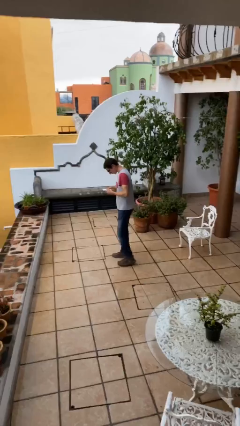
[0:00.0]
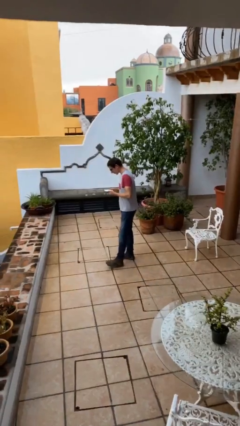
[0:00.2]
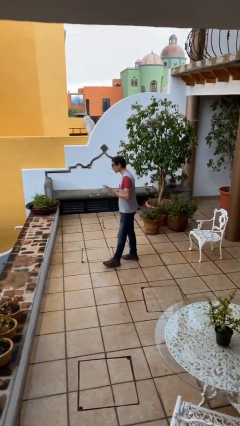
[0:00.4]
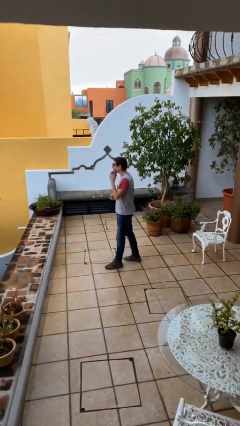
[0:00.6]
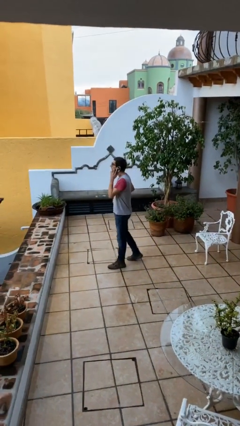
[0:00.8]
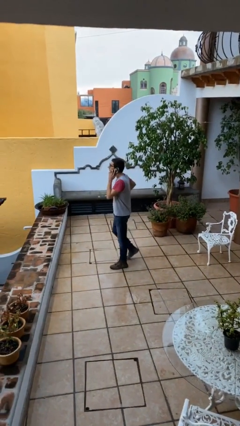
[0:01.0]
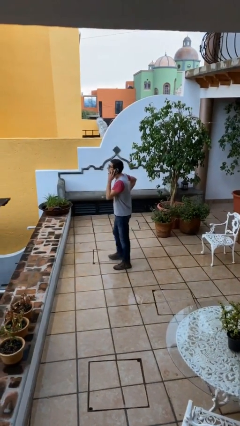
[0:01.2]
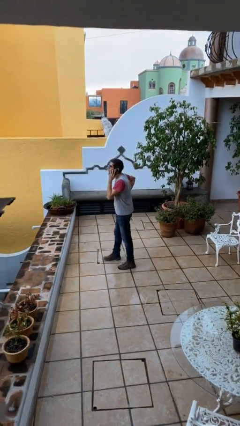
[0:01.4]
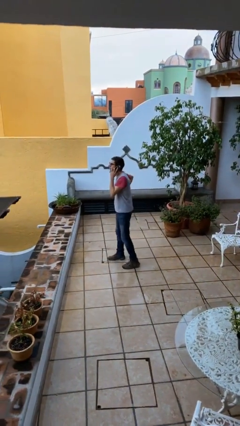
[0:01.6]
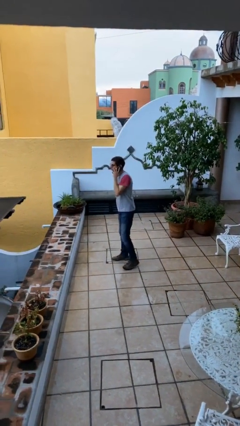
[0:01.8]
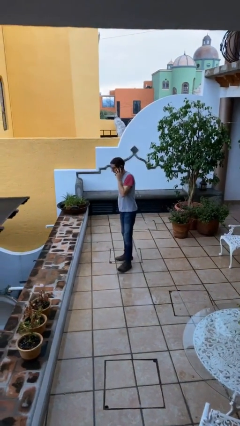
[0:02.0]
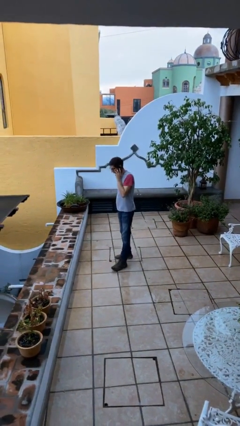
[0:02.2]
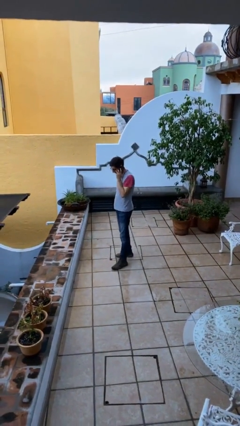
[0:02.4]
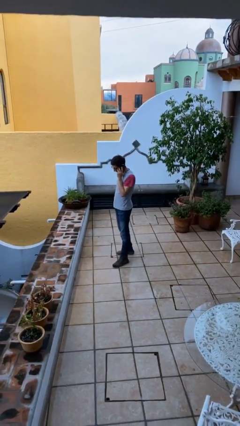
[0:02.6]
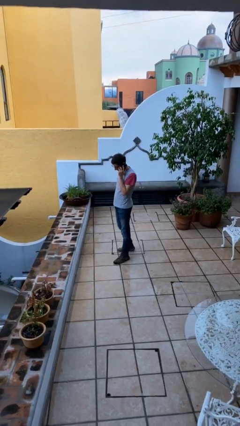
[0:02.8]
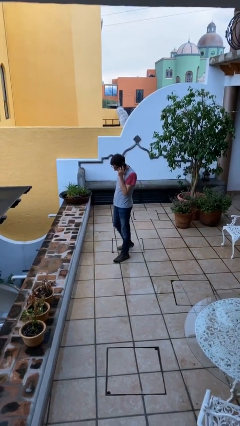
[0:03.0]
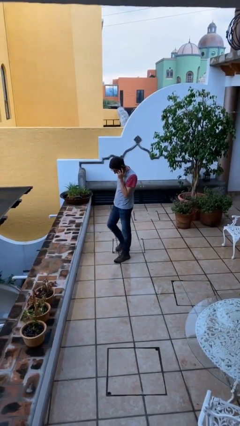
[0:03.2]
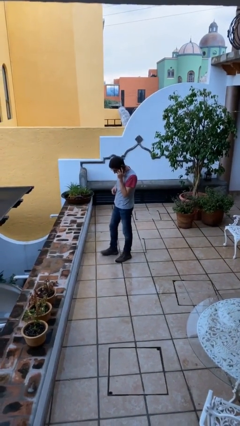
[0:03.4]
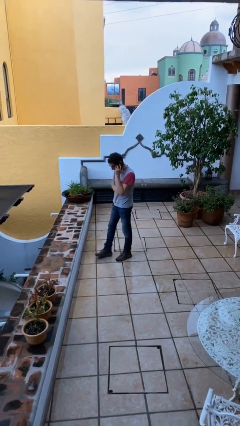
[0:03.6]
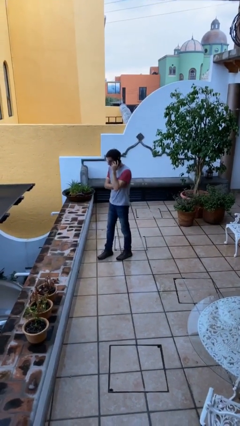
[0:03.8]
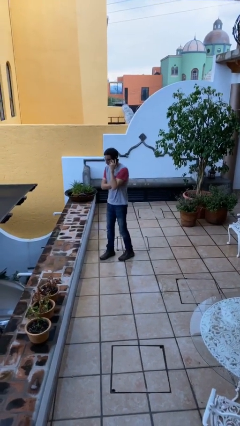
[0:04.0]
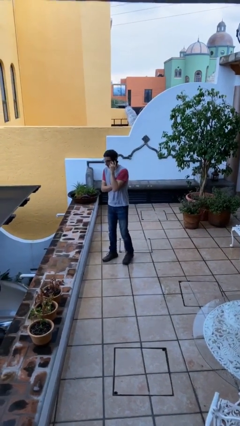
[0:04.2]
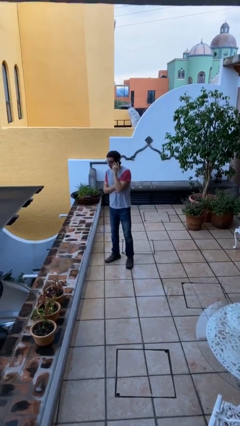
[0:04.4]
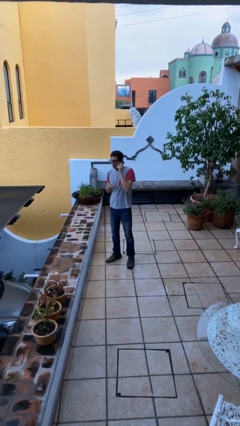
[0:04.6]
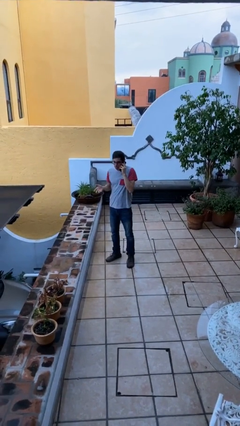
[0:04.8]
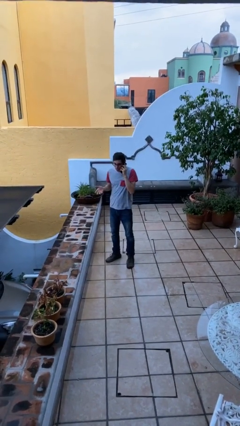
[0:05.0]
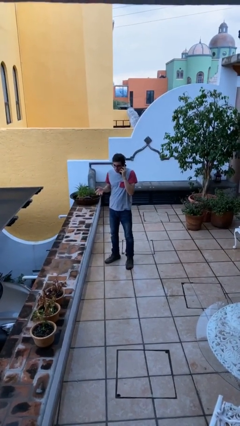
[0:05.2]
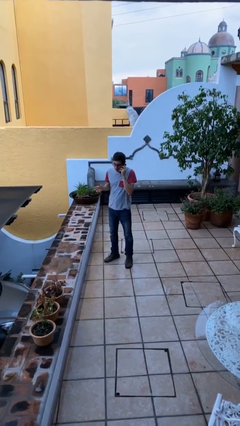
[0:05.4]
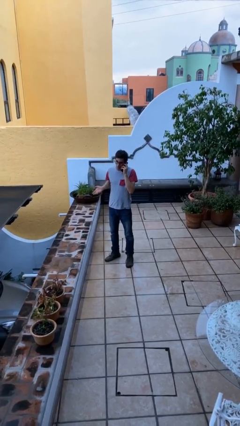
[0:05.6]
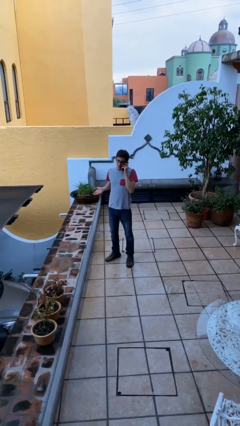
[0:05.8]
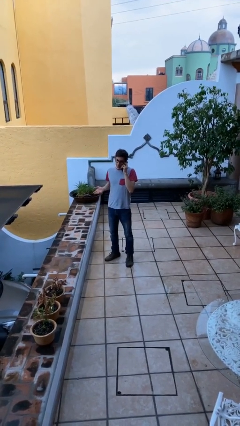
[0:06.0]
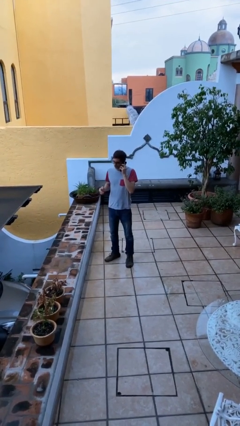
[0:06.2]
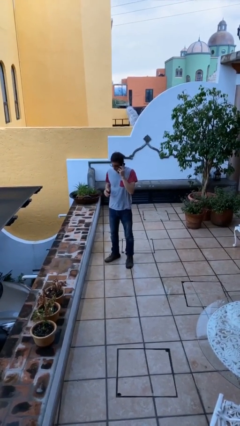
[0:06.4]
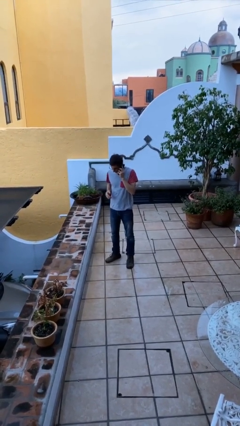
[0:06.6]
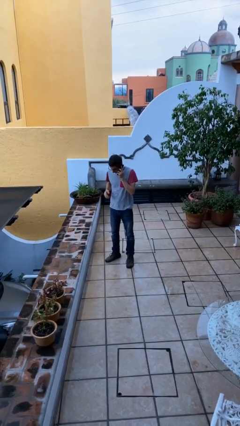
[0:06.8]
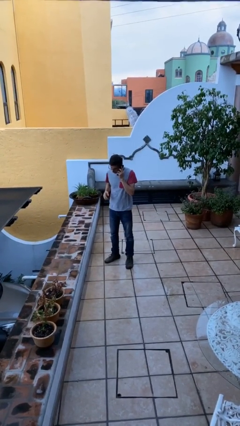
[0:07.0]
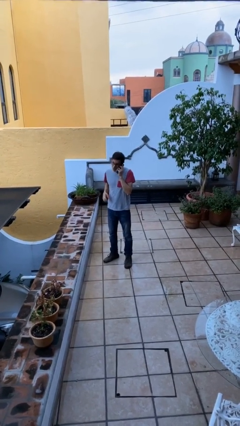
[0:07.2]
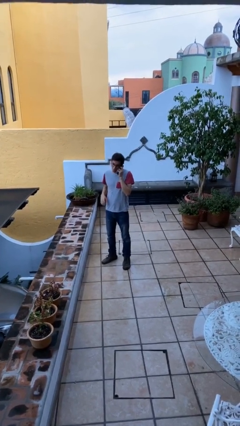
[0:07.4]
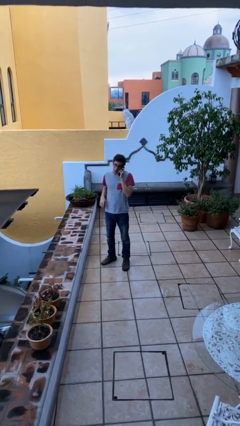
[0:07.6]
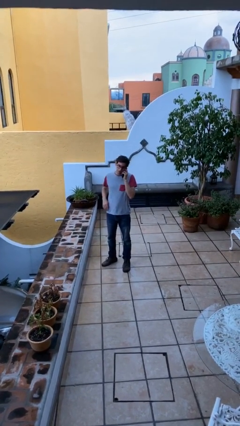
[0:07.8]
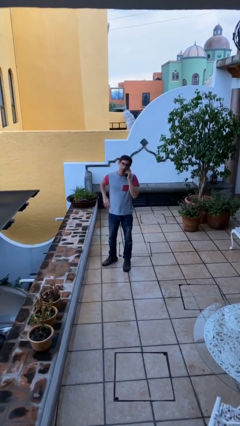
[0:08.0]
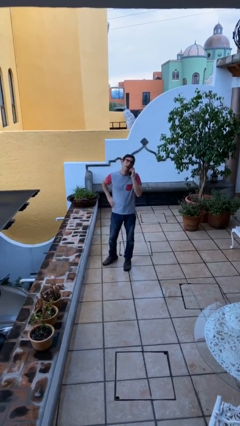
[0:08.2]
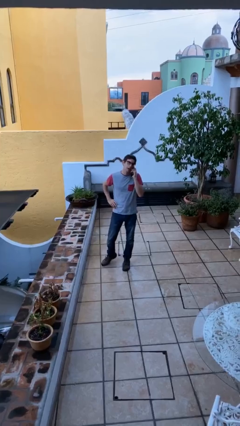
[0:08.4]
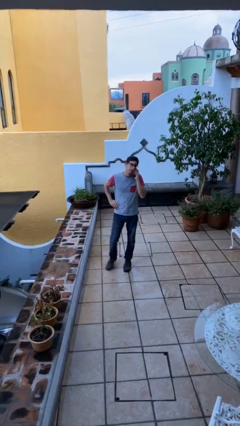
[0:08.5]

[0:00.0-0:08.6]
person talks on phone

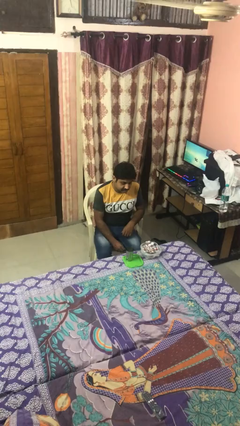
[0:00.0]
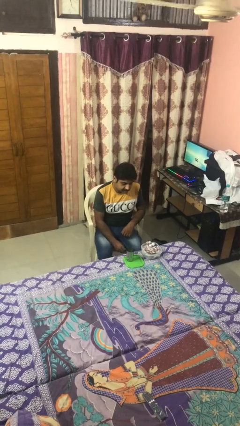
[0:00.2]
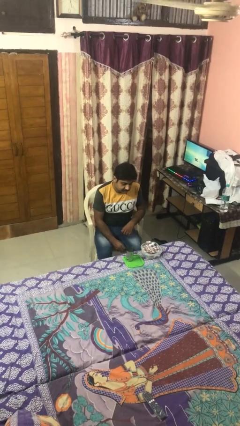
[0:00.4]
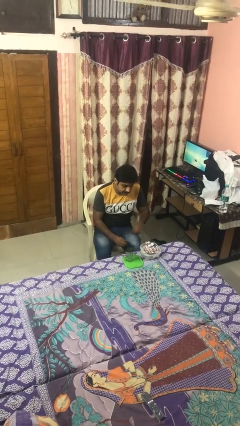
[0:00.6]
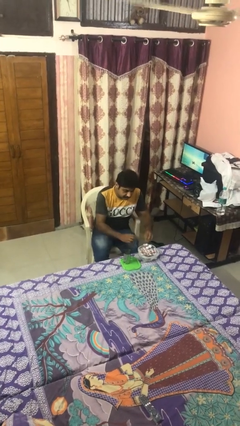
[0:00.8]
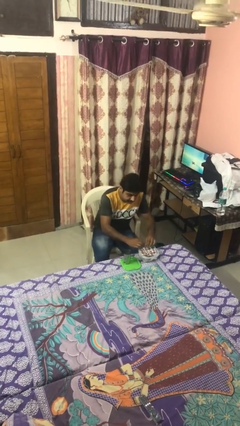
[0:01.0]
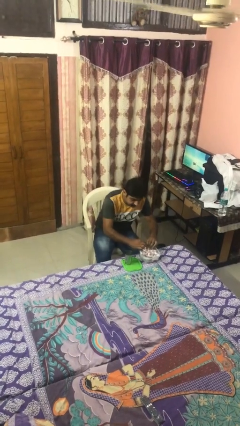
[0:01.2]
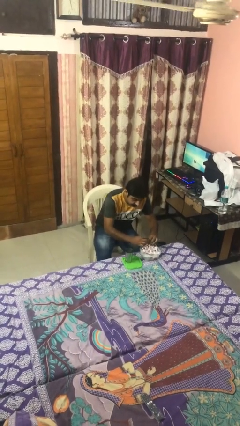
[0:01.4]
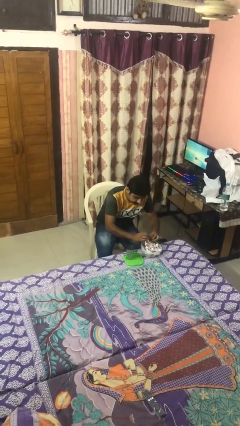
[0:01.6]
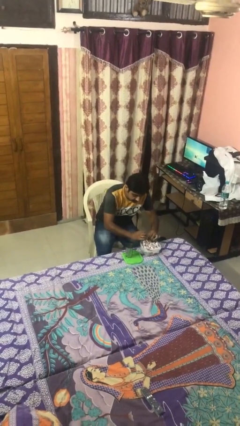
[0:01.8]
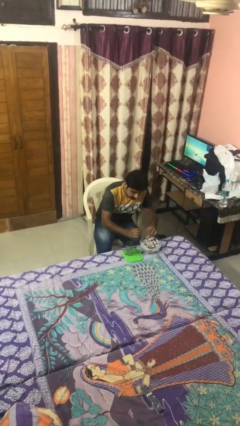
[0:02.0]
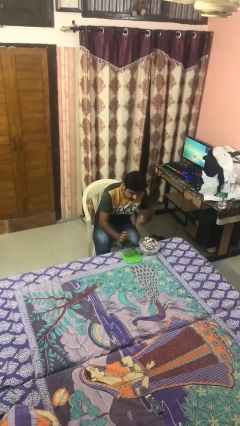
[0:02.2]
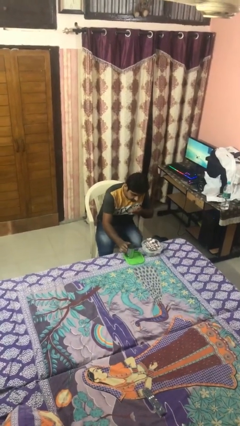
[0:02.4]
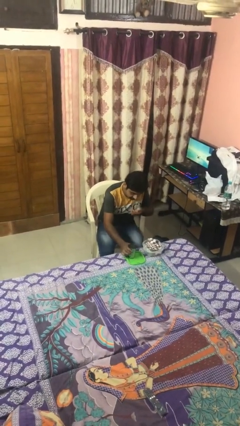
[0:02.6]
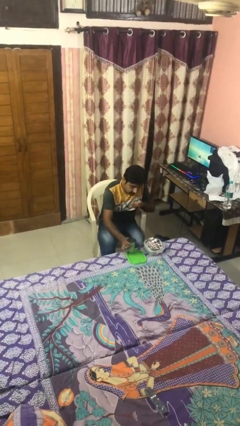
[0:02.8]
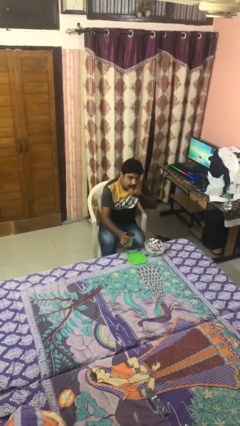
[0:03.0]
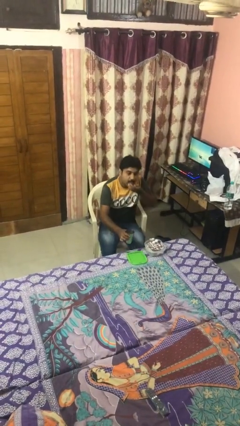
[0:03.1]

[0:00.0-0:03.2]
person takes medicine pills

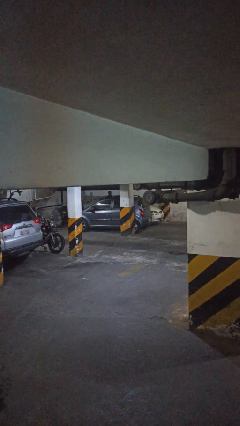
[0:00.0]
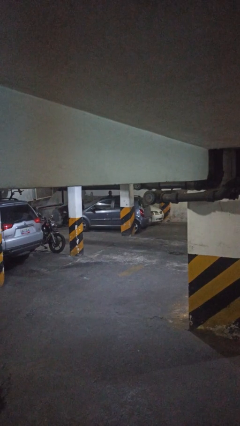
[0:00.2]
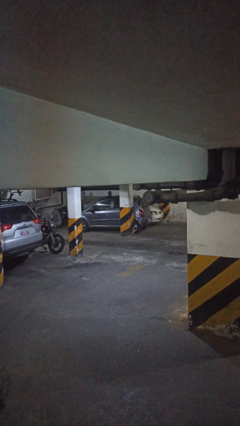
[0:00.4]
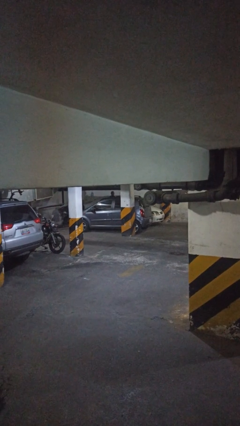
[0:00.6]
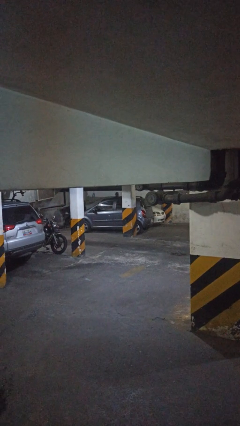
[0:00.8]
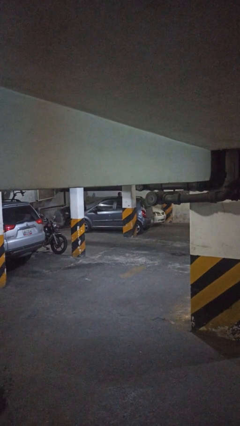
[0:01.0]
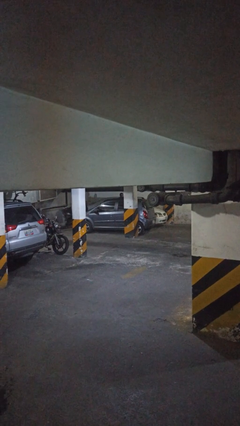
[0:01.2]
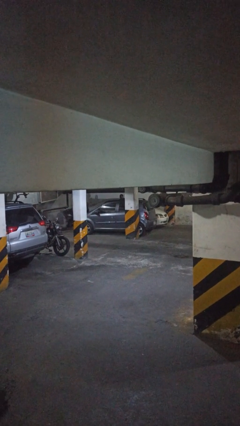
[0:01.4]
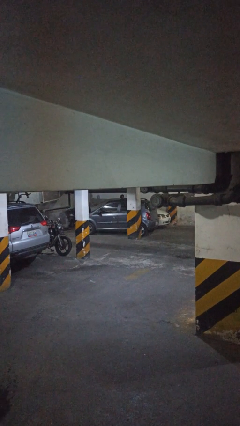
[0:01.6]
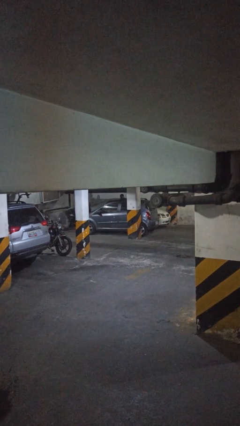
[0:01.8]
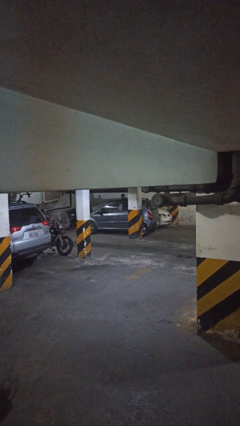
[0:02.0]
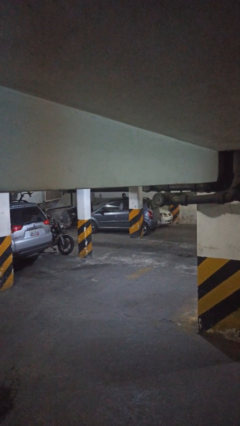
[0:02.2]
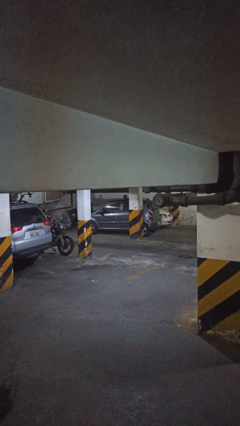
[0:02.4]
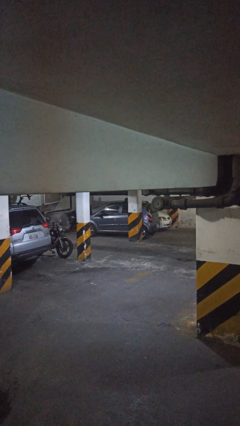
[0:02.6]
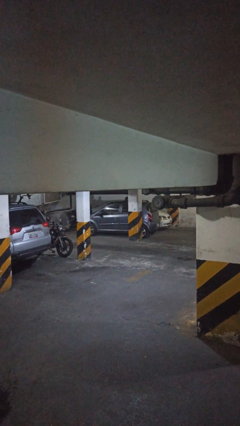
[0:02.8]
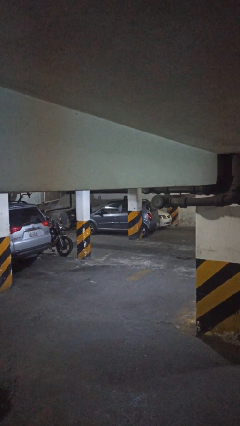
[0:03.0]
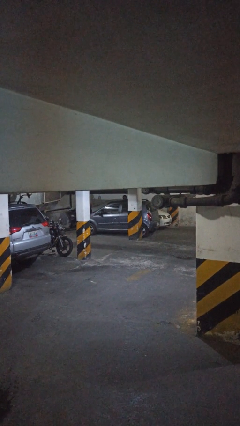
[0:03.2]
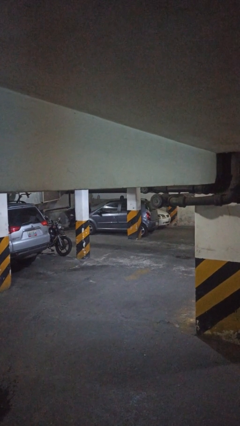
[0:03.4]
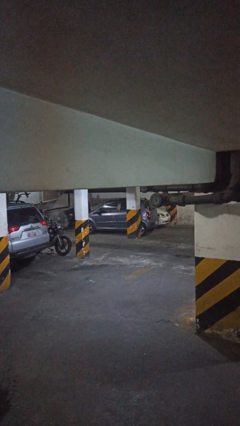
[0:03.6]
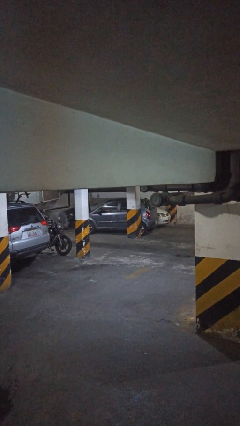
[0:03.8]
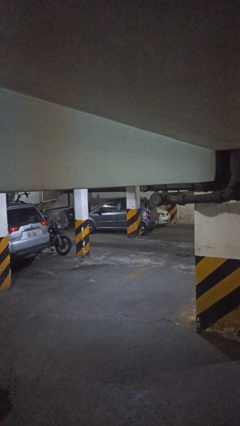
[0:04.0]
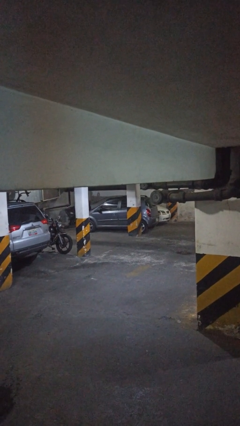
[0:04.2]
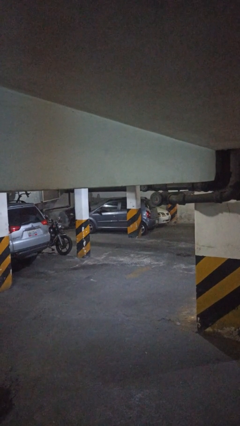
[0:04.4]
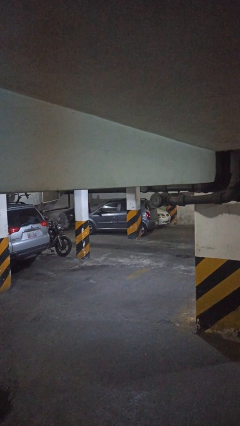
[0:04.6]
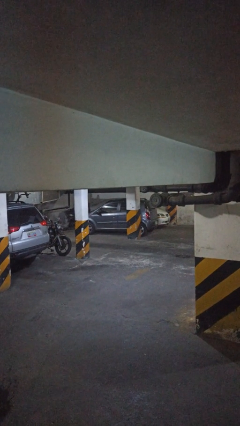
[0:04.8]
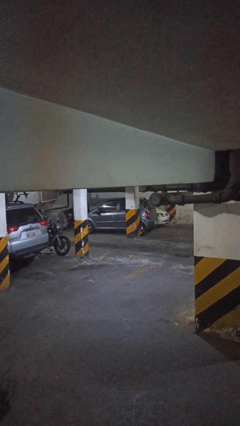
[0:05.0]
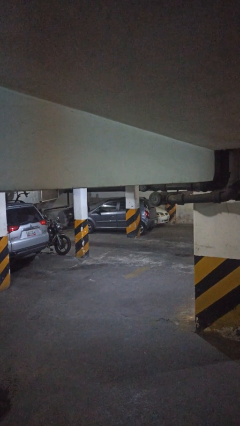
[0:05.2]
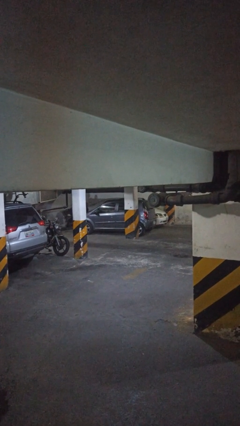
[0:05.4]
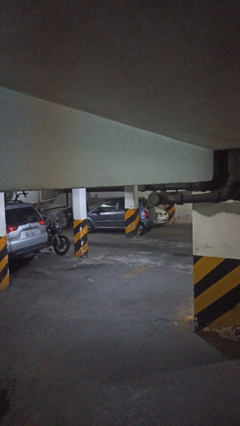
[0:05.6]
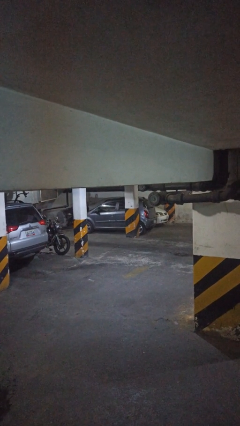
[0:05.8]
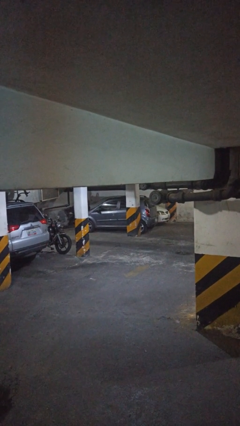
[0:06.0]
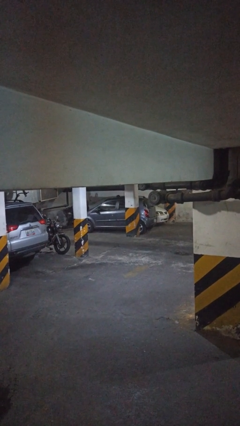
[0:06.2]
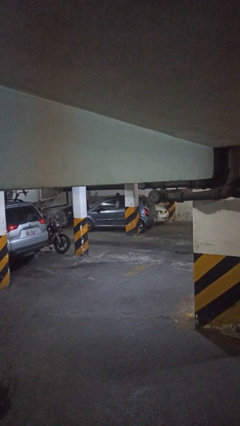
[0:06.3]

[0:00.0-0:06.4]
car picks up person
